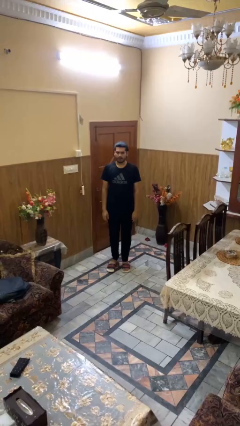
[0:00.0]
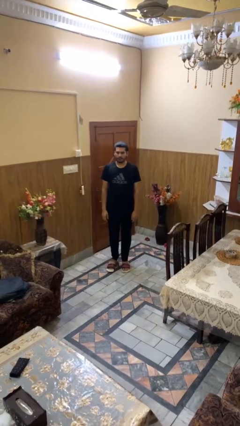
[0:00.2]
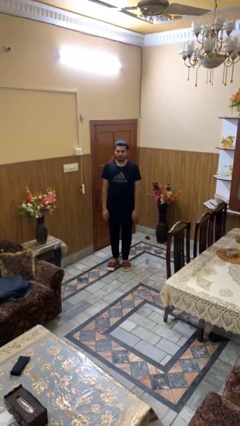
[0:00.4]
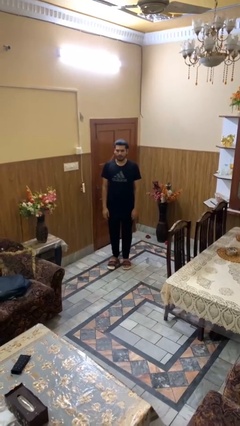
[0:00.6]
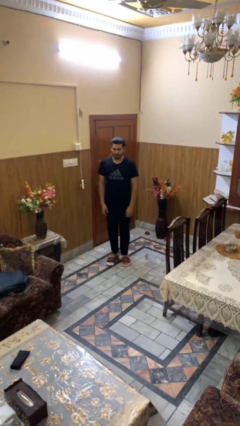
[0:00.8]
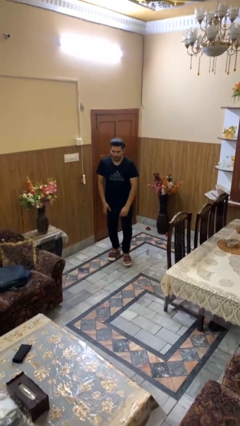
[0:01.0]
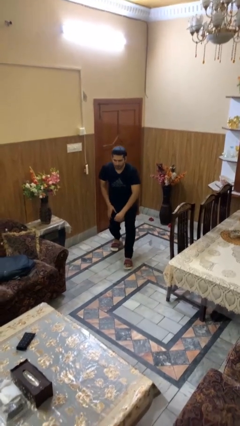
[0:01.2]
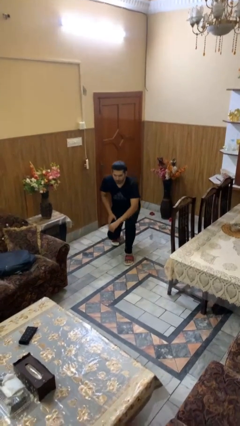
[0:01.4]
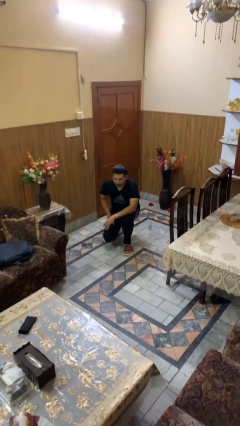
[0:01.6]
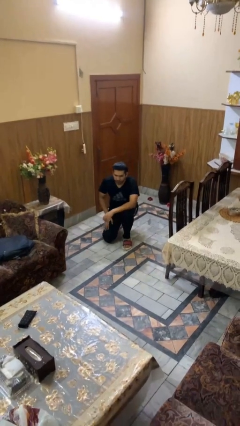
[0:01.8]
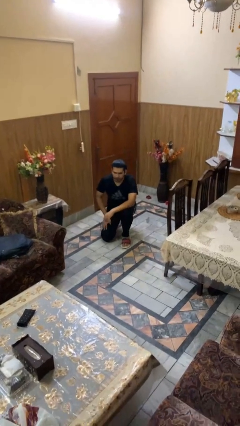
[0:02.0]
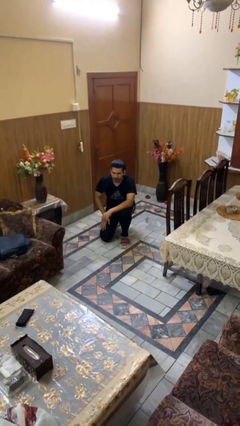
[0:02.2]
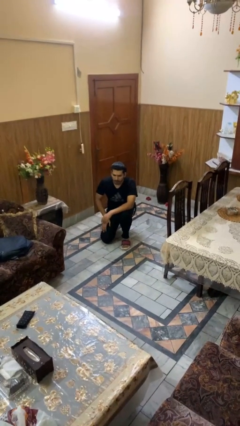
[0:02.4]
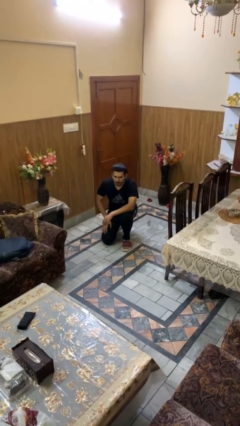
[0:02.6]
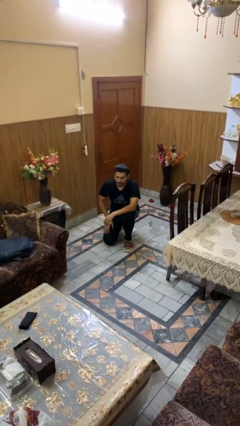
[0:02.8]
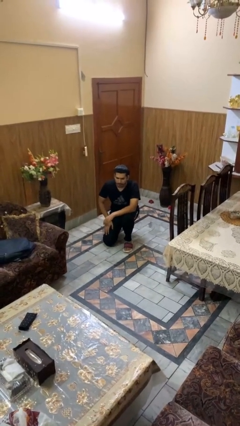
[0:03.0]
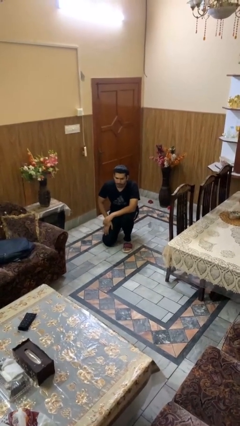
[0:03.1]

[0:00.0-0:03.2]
person kneels

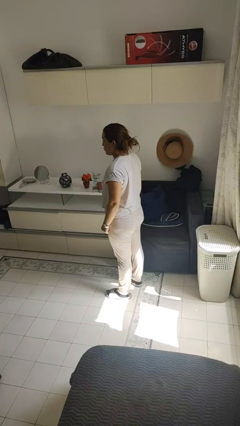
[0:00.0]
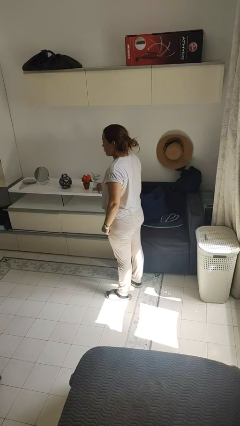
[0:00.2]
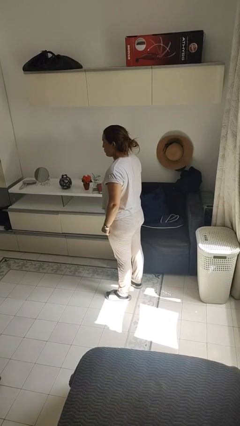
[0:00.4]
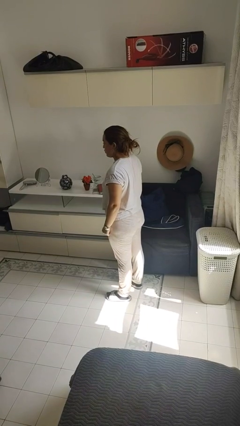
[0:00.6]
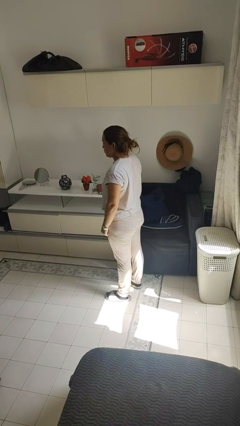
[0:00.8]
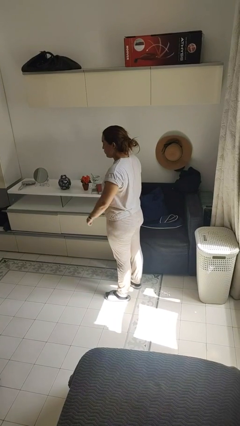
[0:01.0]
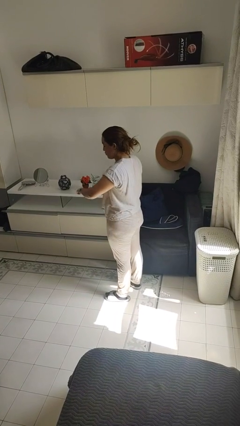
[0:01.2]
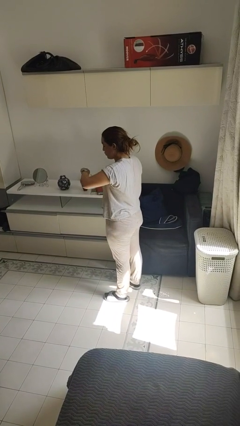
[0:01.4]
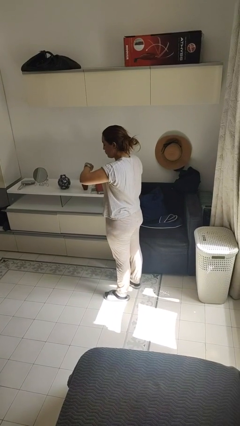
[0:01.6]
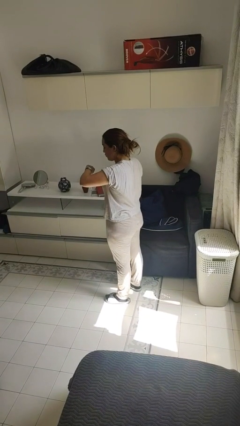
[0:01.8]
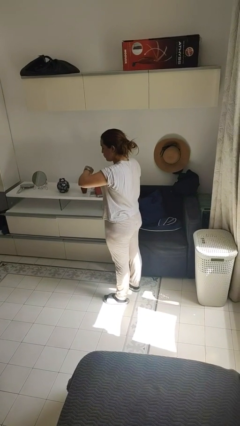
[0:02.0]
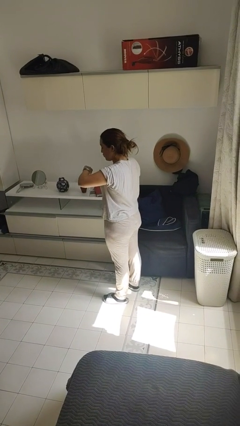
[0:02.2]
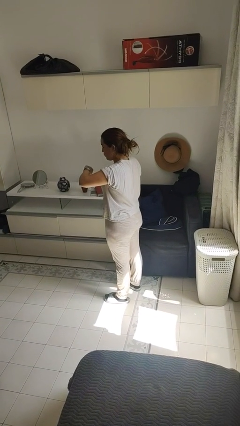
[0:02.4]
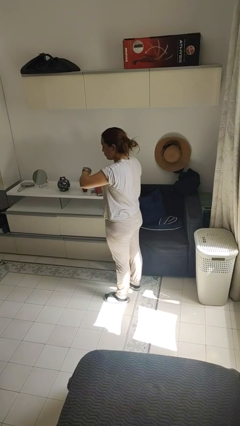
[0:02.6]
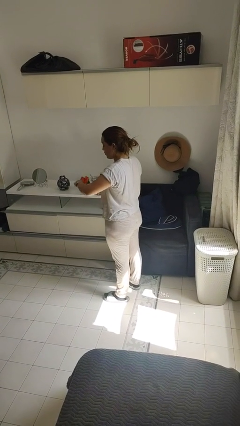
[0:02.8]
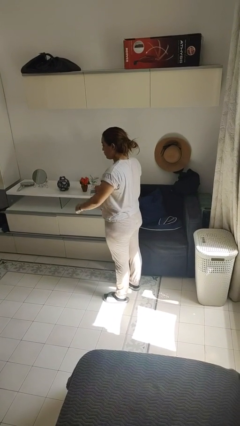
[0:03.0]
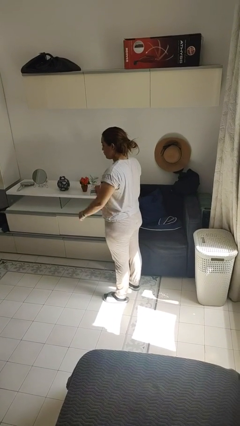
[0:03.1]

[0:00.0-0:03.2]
person looks at wristwatch

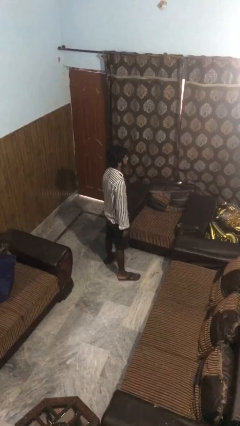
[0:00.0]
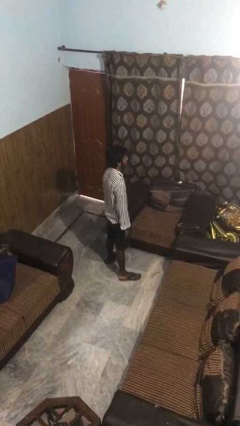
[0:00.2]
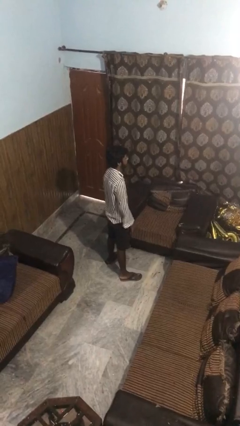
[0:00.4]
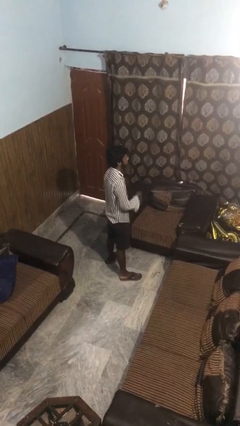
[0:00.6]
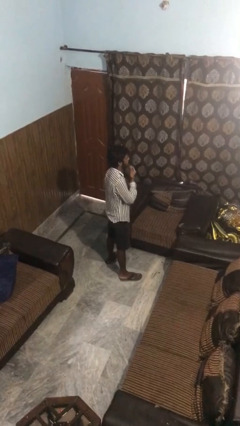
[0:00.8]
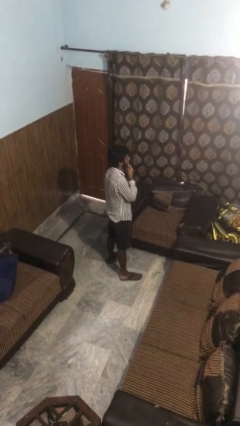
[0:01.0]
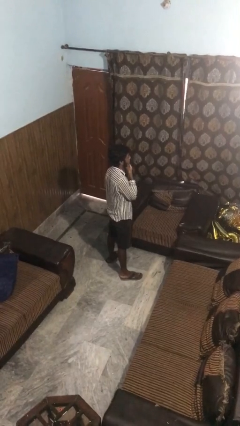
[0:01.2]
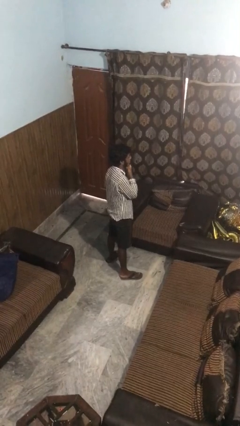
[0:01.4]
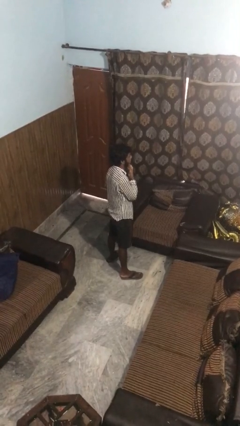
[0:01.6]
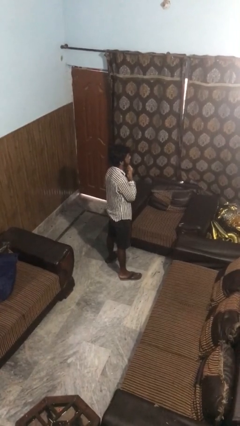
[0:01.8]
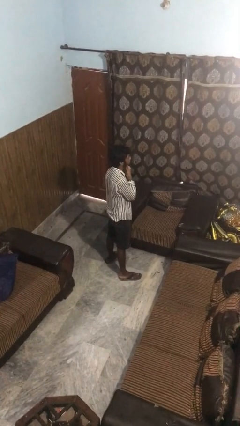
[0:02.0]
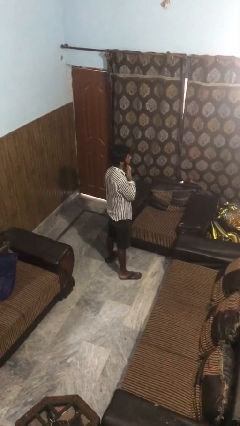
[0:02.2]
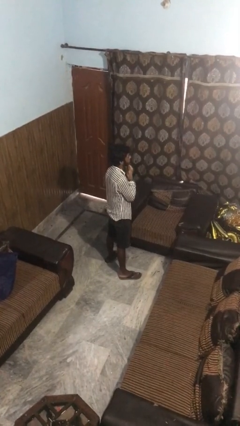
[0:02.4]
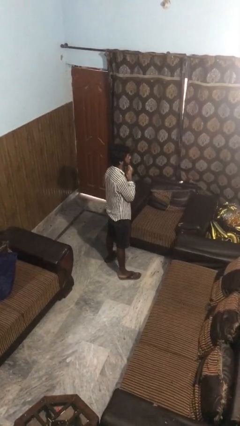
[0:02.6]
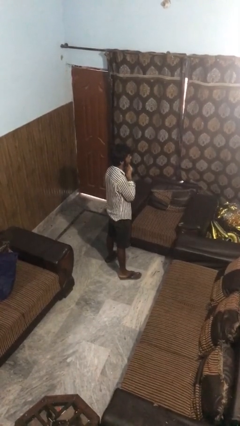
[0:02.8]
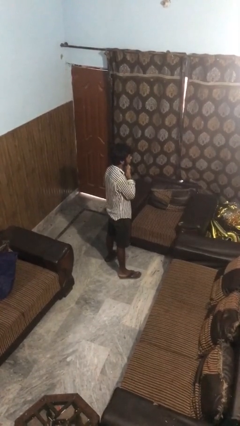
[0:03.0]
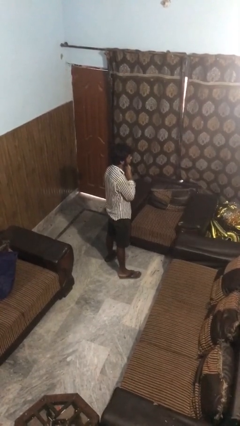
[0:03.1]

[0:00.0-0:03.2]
person strokes chin

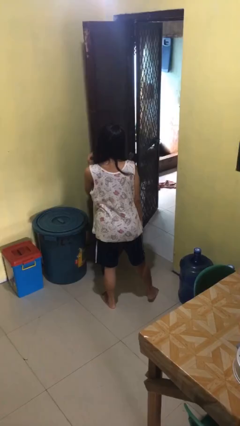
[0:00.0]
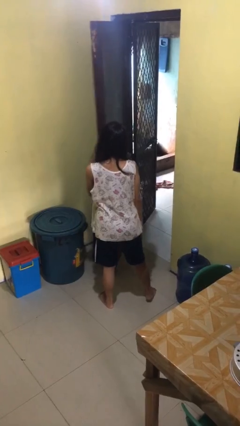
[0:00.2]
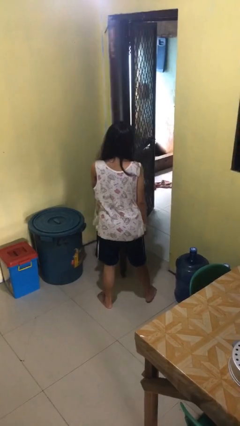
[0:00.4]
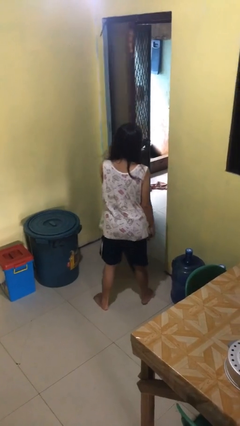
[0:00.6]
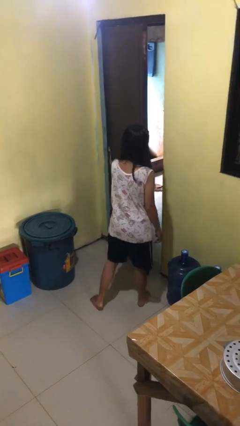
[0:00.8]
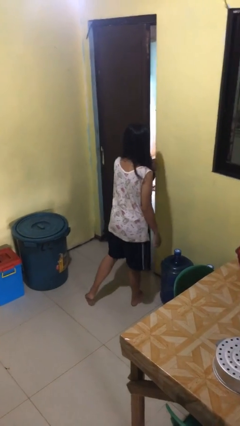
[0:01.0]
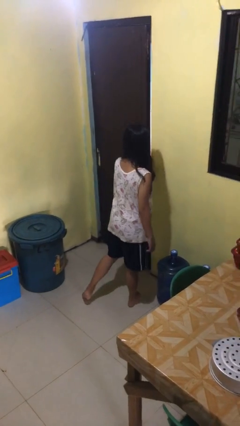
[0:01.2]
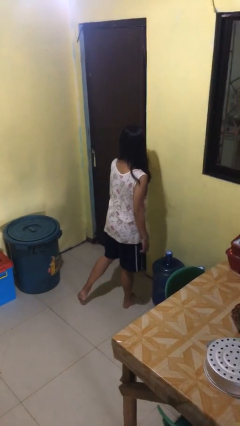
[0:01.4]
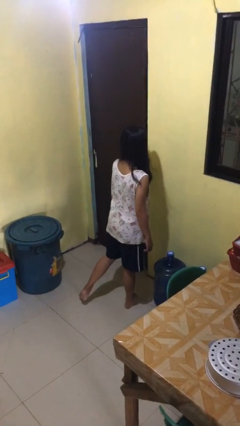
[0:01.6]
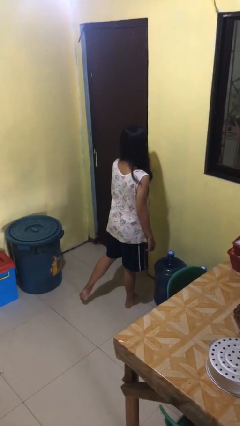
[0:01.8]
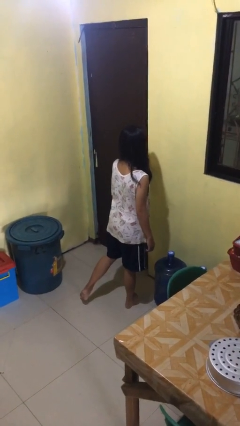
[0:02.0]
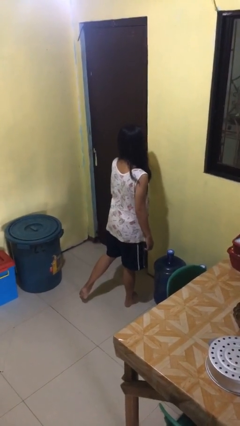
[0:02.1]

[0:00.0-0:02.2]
person closes facility door

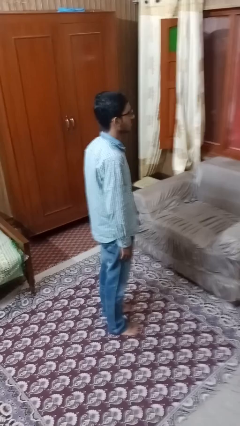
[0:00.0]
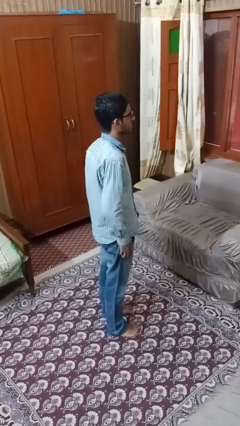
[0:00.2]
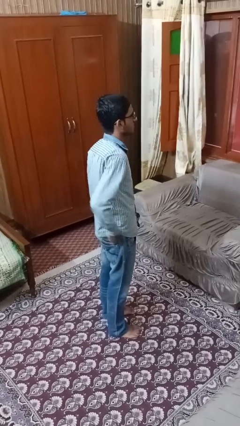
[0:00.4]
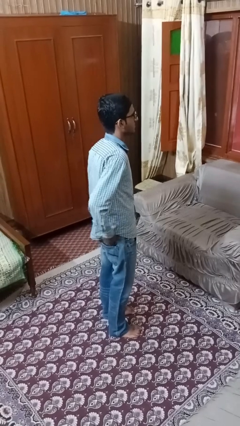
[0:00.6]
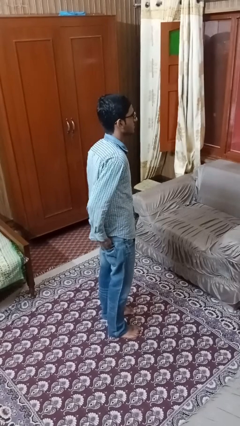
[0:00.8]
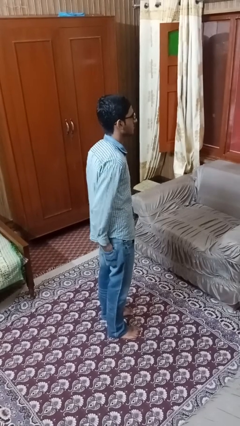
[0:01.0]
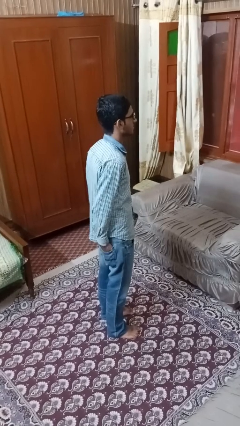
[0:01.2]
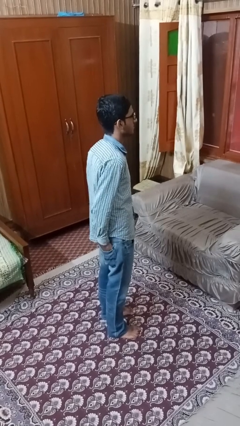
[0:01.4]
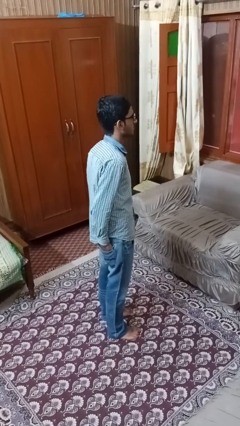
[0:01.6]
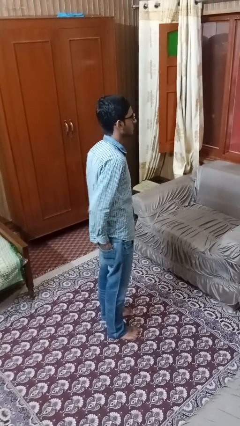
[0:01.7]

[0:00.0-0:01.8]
person puts hands in back pockets

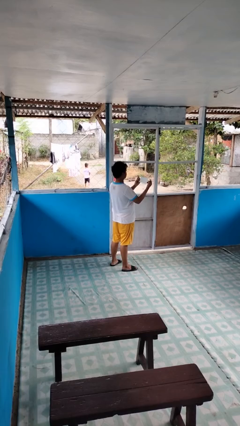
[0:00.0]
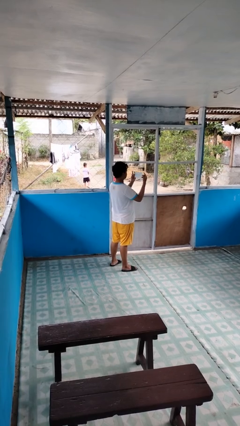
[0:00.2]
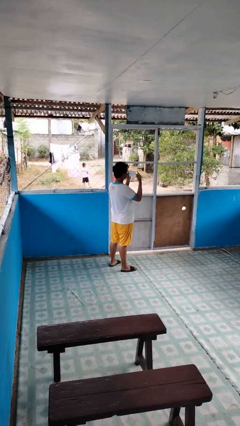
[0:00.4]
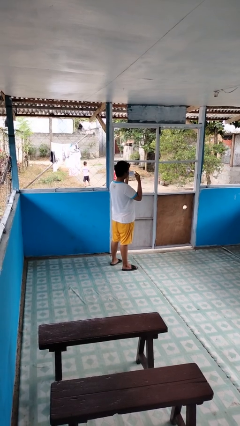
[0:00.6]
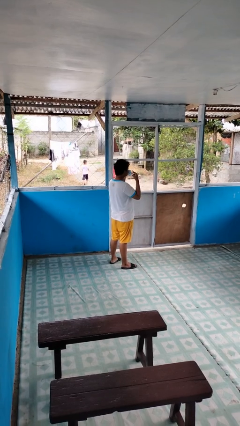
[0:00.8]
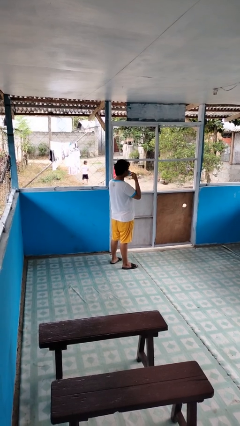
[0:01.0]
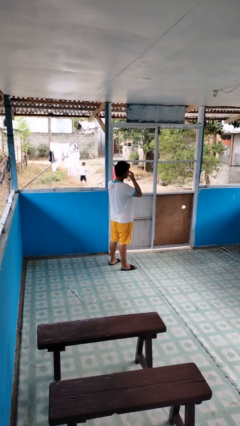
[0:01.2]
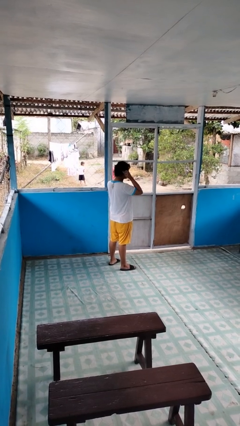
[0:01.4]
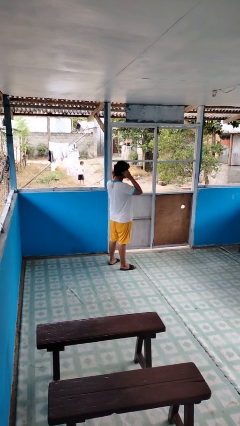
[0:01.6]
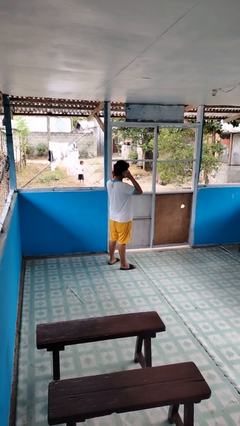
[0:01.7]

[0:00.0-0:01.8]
person puts on facemask

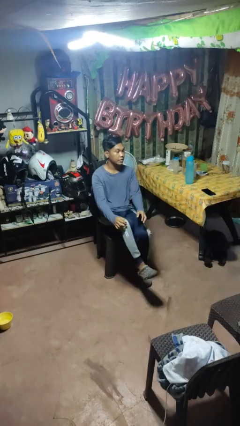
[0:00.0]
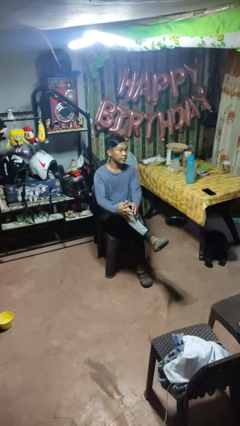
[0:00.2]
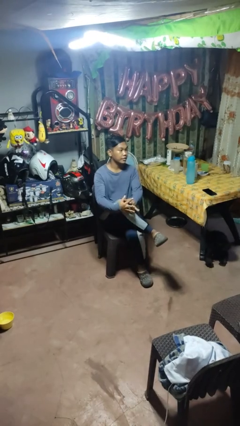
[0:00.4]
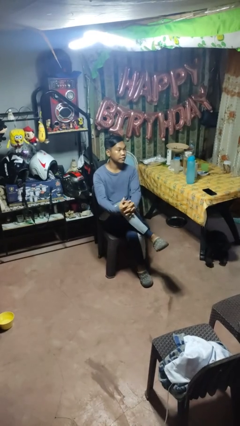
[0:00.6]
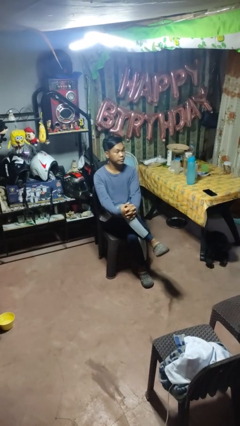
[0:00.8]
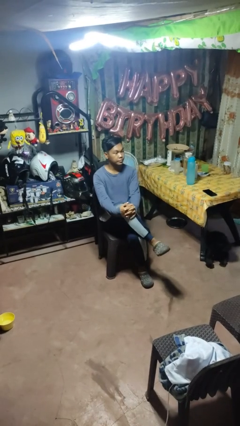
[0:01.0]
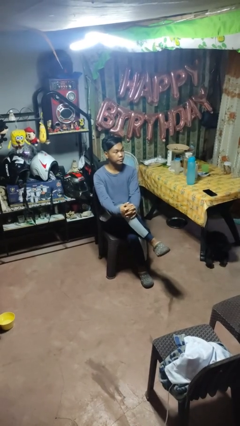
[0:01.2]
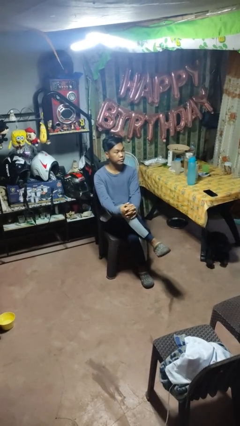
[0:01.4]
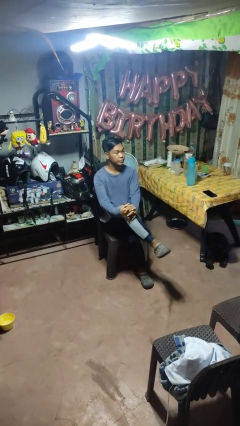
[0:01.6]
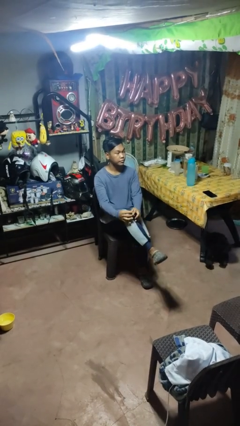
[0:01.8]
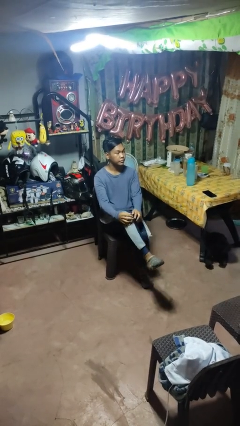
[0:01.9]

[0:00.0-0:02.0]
person crosses legs
